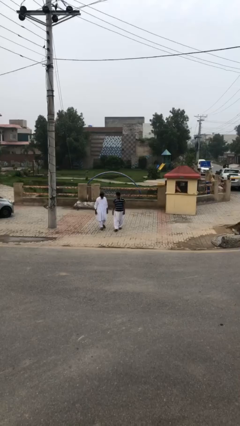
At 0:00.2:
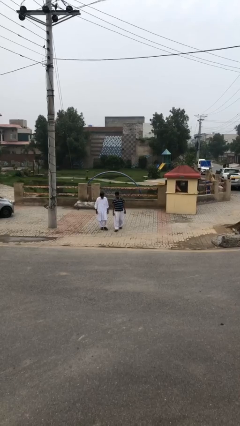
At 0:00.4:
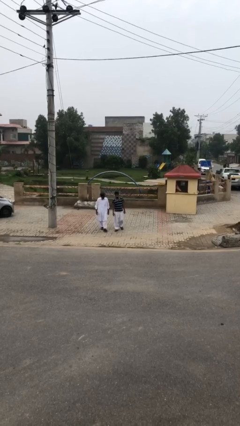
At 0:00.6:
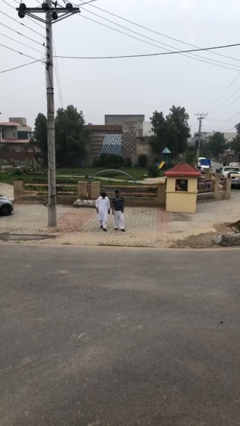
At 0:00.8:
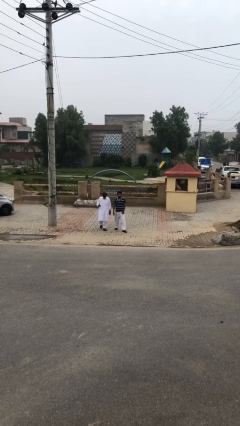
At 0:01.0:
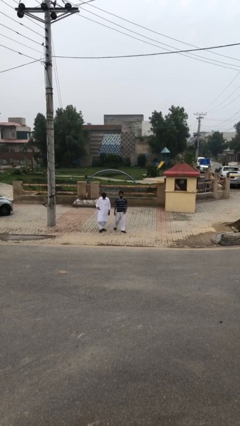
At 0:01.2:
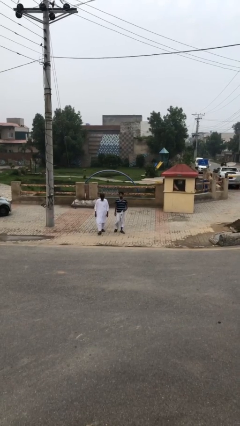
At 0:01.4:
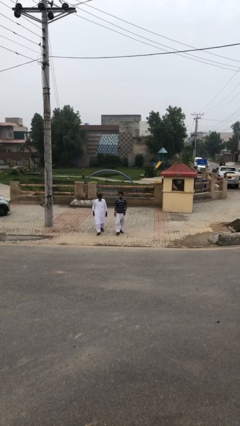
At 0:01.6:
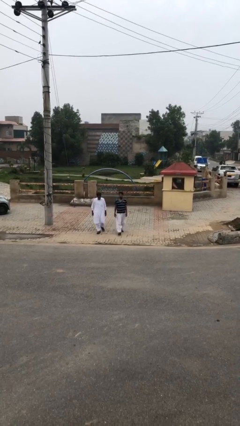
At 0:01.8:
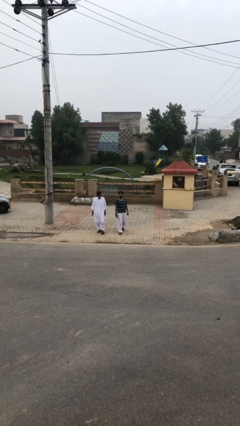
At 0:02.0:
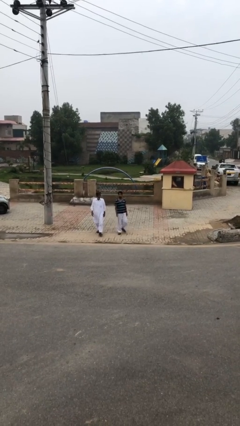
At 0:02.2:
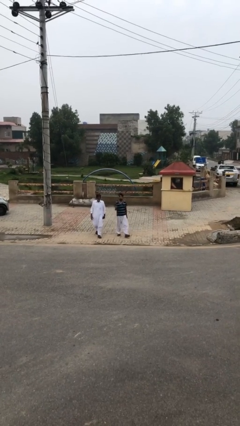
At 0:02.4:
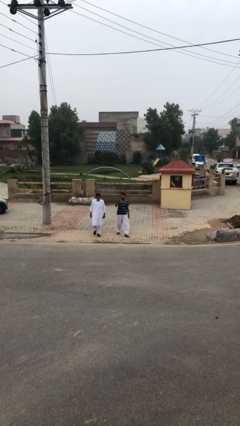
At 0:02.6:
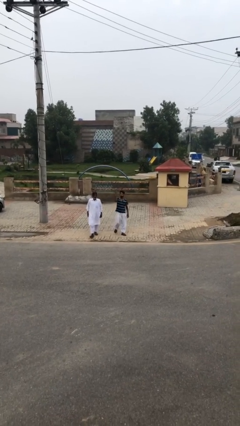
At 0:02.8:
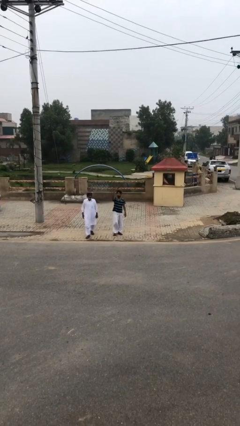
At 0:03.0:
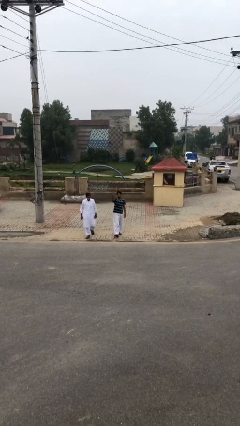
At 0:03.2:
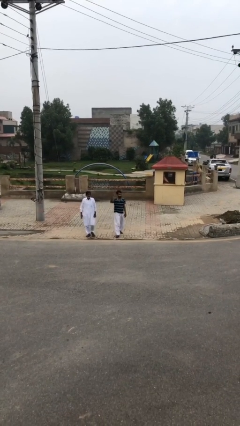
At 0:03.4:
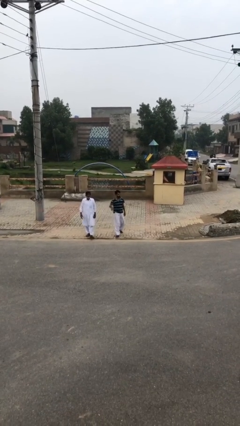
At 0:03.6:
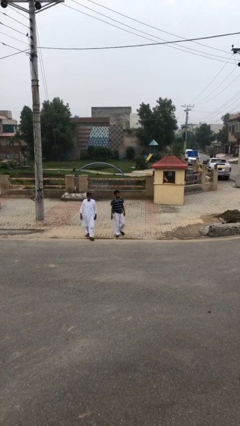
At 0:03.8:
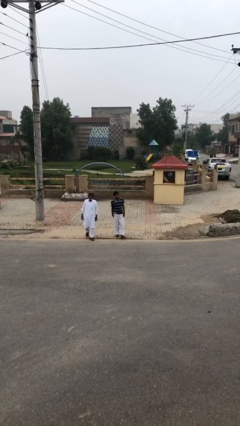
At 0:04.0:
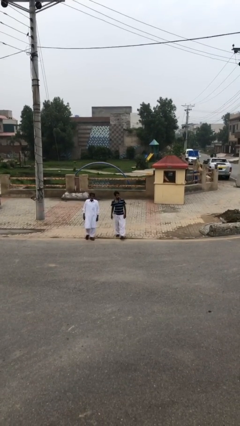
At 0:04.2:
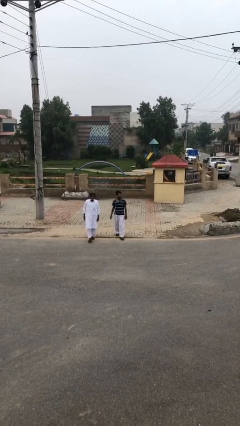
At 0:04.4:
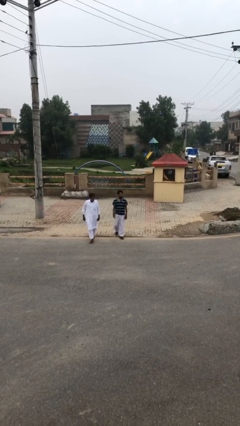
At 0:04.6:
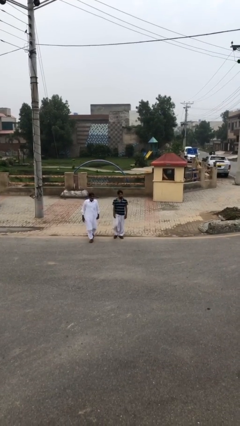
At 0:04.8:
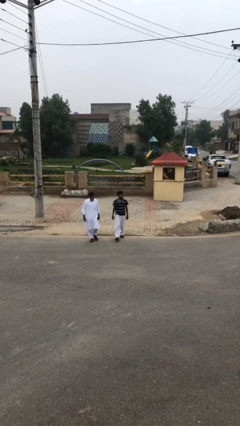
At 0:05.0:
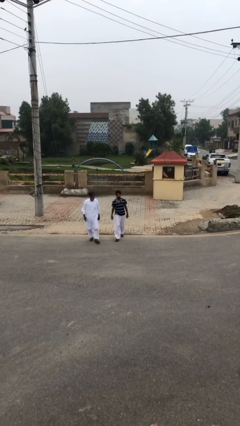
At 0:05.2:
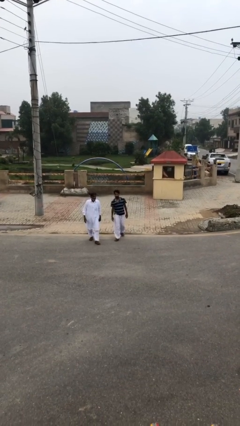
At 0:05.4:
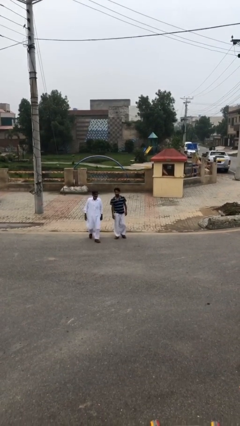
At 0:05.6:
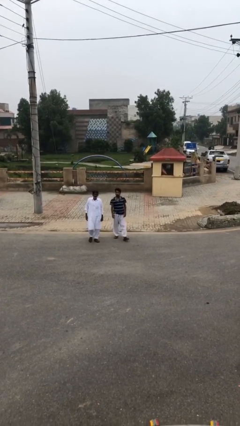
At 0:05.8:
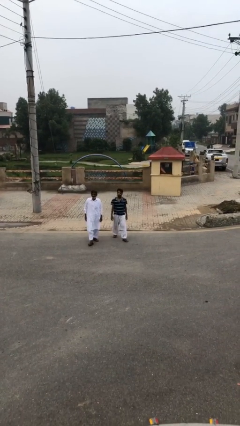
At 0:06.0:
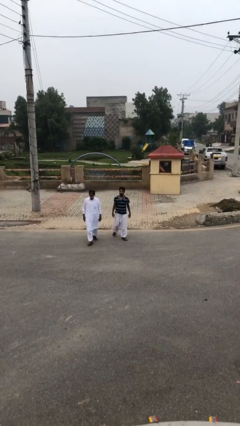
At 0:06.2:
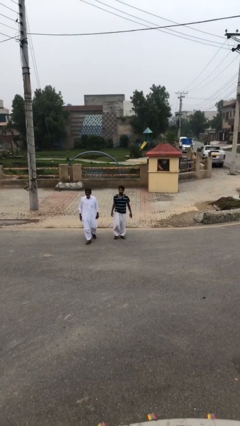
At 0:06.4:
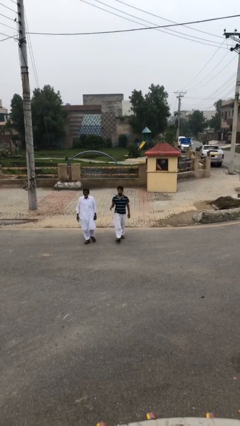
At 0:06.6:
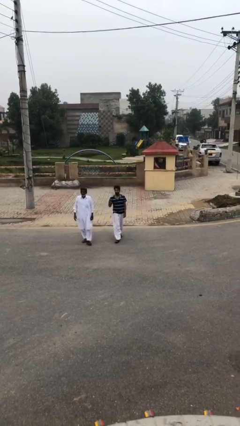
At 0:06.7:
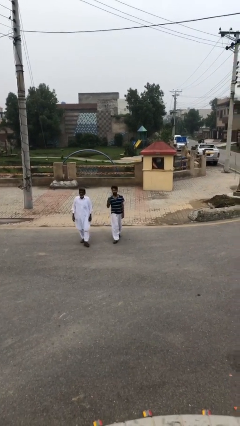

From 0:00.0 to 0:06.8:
person talks to person

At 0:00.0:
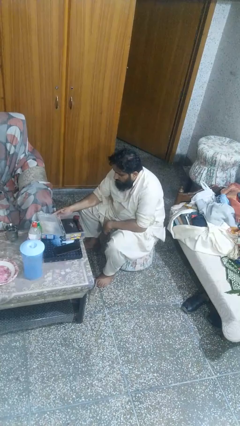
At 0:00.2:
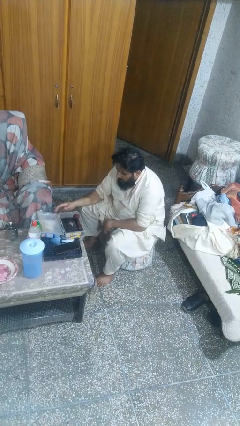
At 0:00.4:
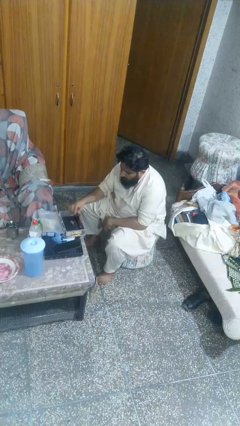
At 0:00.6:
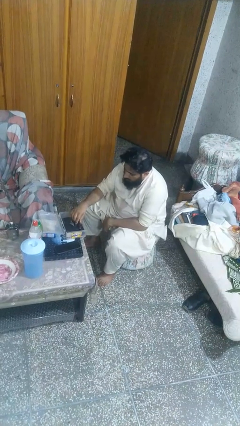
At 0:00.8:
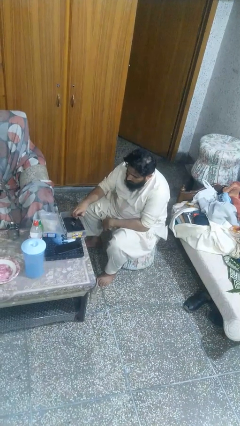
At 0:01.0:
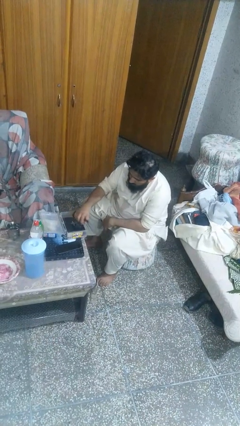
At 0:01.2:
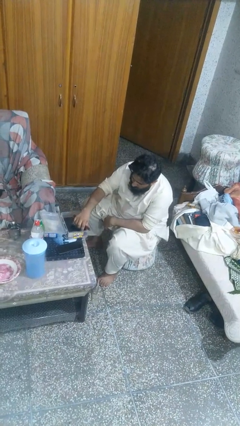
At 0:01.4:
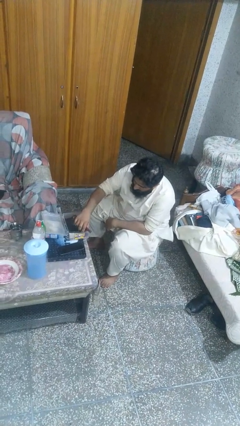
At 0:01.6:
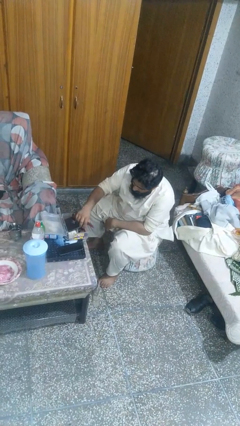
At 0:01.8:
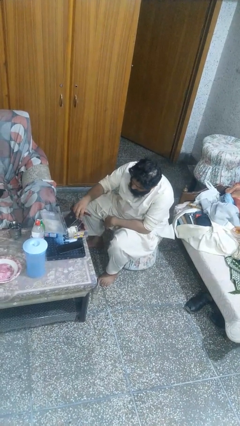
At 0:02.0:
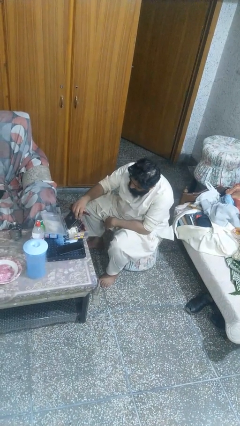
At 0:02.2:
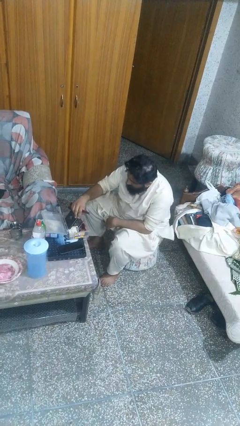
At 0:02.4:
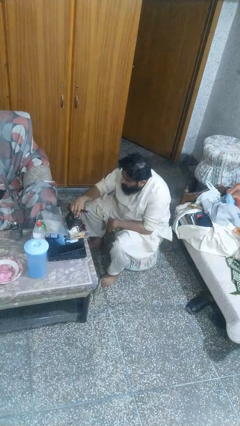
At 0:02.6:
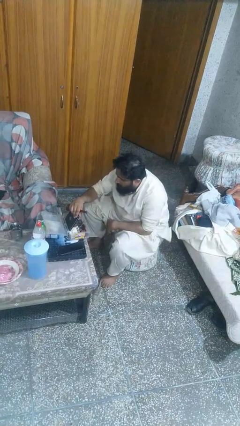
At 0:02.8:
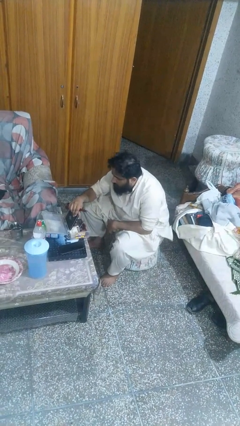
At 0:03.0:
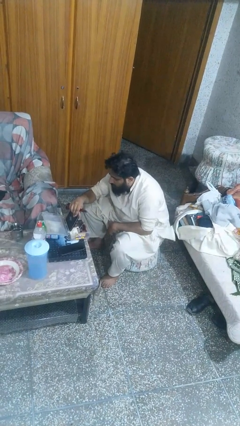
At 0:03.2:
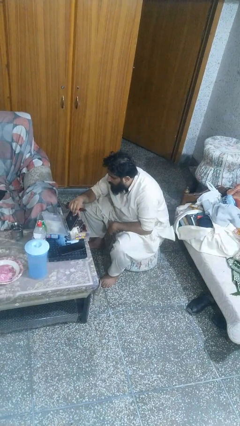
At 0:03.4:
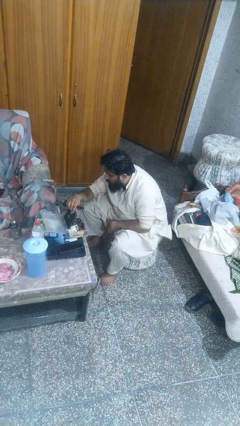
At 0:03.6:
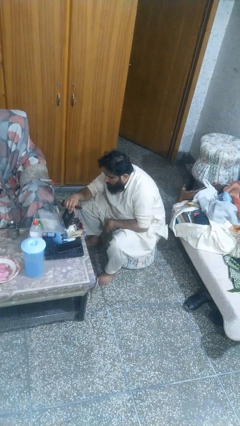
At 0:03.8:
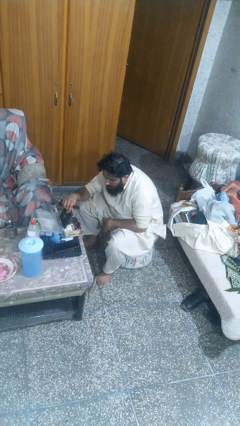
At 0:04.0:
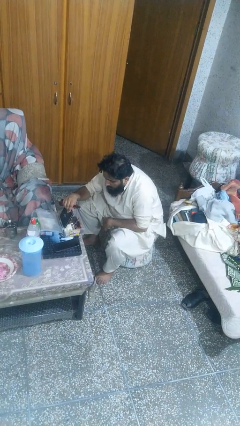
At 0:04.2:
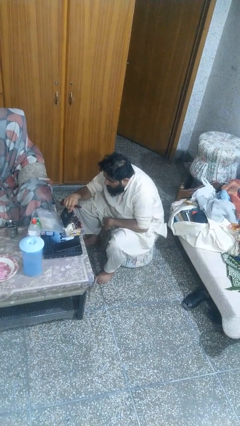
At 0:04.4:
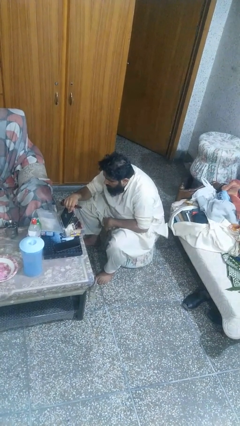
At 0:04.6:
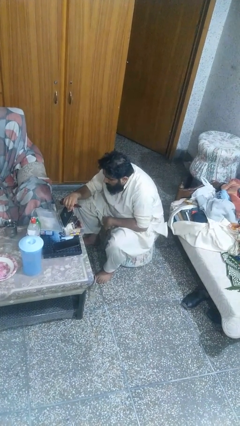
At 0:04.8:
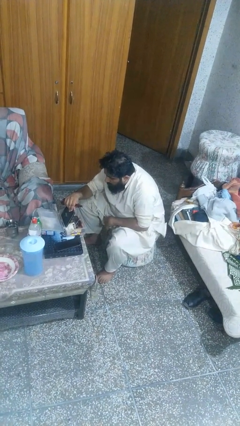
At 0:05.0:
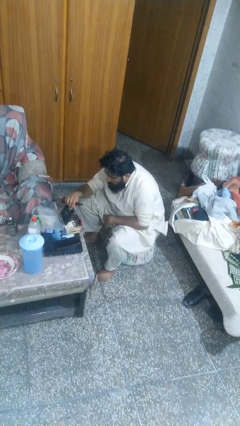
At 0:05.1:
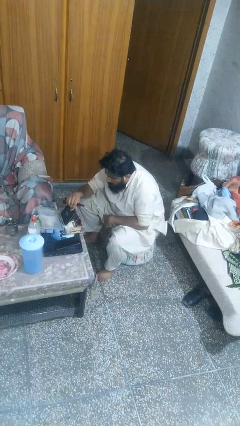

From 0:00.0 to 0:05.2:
person searches jewelry box

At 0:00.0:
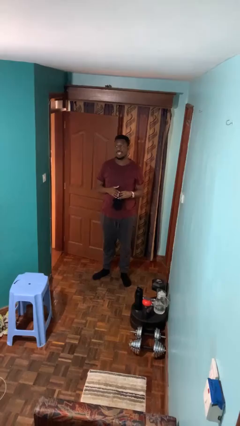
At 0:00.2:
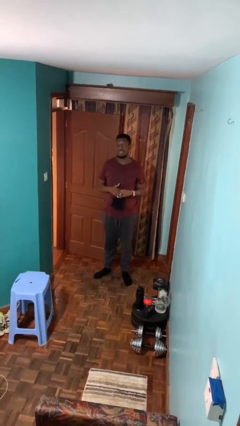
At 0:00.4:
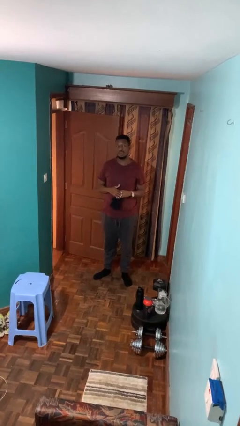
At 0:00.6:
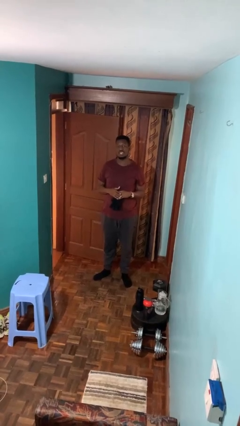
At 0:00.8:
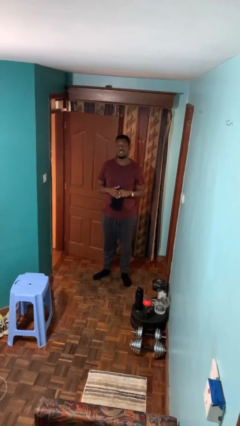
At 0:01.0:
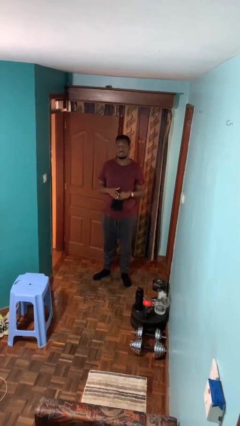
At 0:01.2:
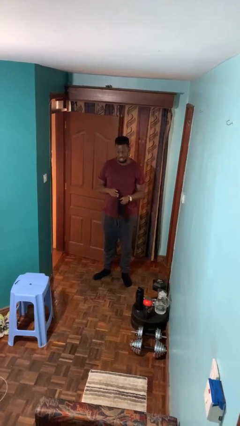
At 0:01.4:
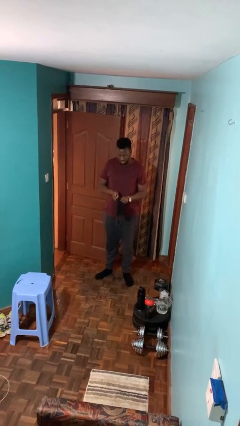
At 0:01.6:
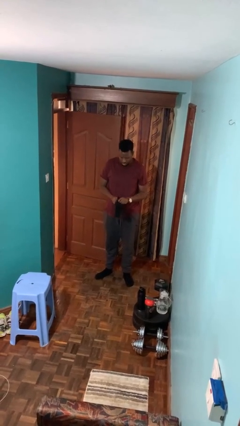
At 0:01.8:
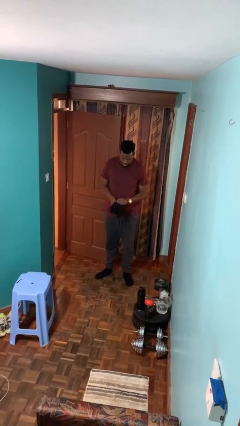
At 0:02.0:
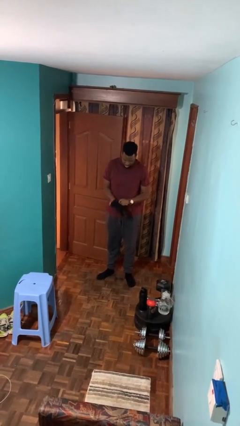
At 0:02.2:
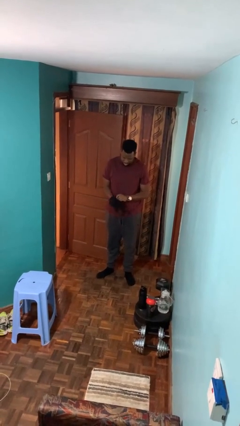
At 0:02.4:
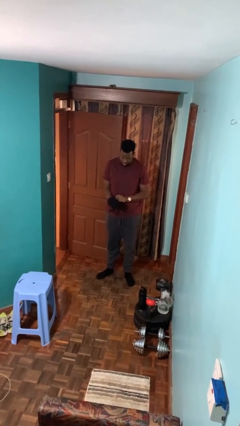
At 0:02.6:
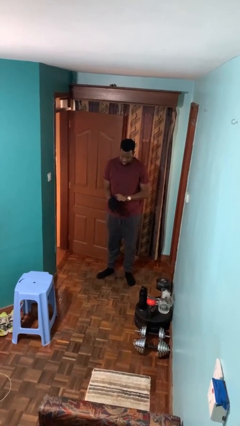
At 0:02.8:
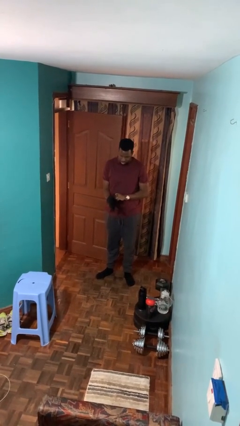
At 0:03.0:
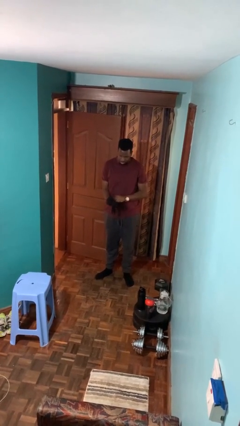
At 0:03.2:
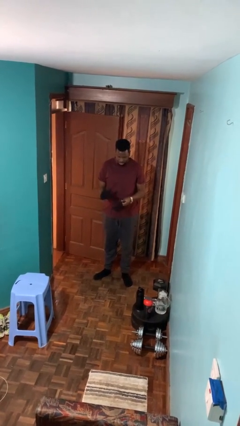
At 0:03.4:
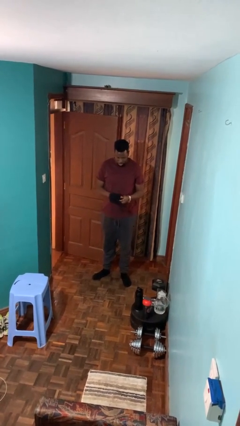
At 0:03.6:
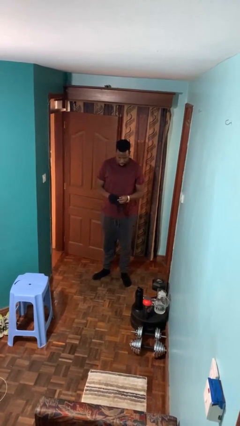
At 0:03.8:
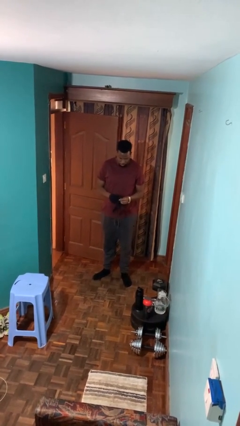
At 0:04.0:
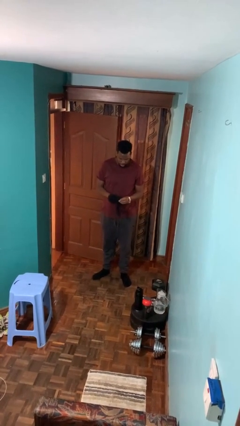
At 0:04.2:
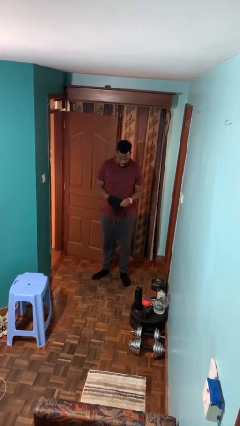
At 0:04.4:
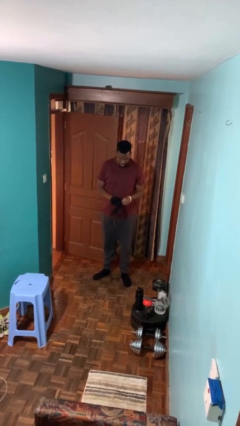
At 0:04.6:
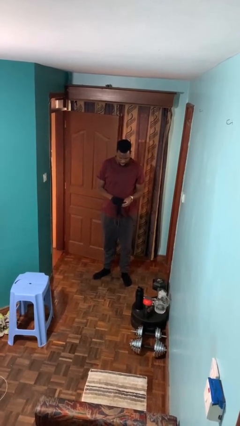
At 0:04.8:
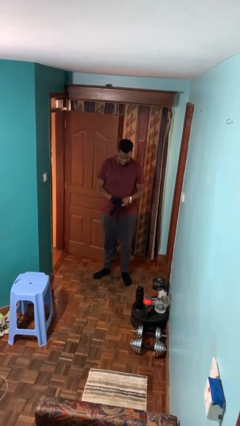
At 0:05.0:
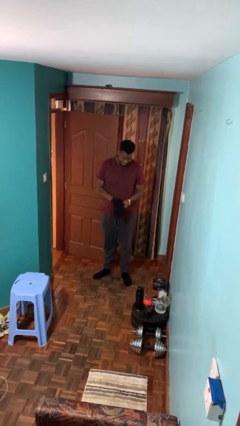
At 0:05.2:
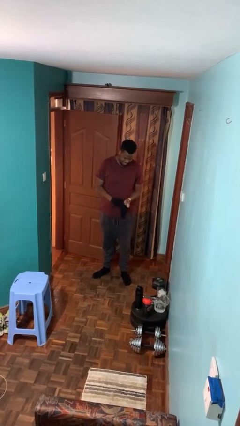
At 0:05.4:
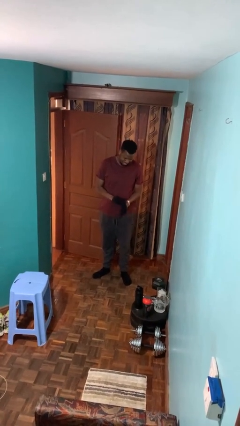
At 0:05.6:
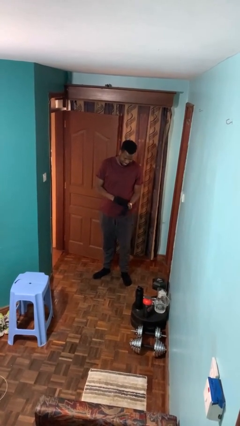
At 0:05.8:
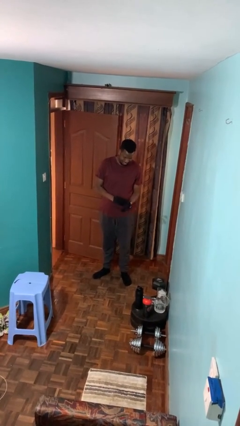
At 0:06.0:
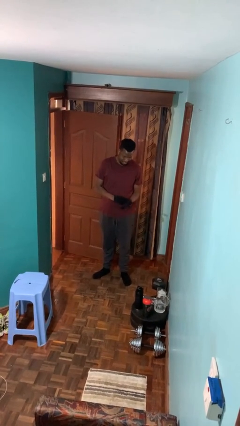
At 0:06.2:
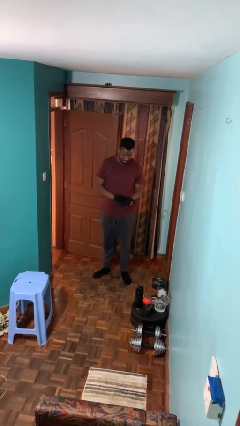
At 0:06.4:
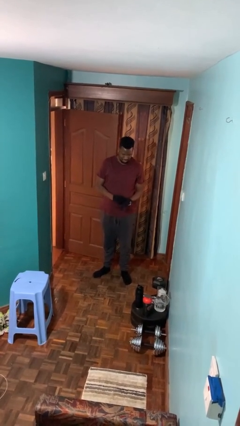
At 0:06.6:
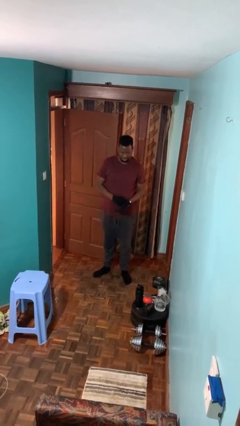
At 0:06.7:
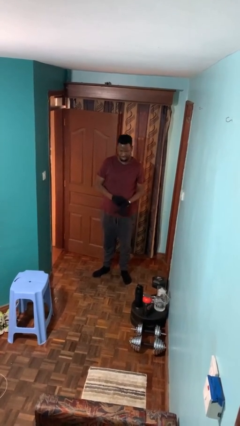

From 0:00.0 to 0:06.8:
person puts on gloves
